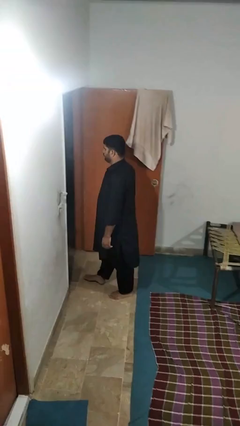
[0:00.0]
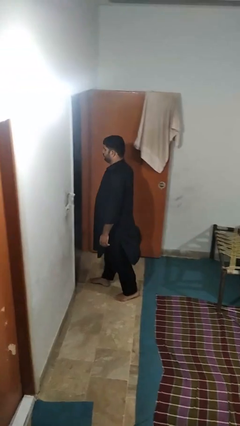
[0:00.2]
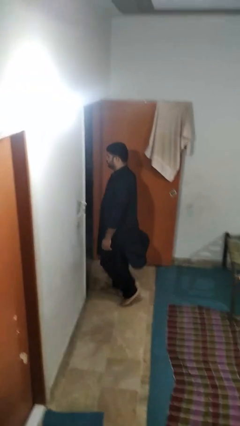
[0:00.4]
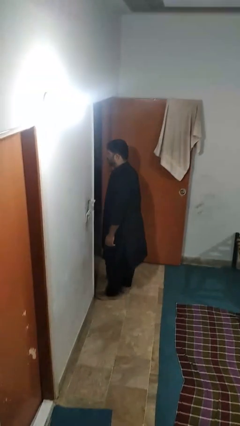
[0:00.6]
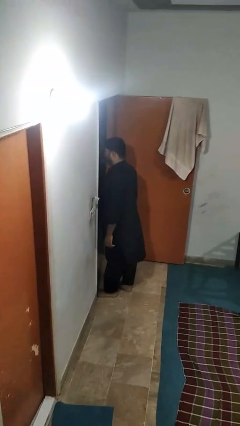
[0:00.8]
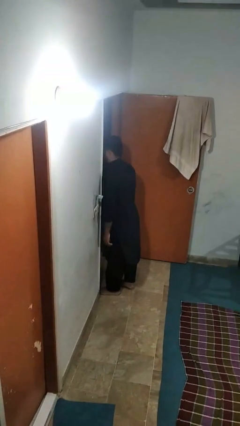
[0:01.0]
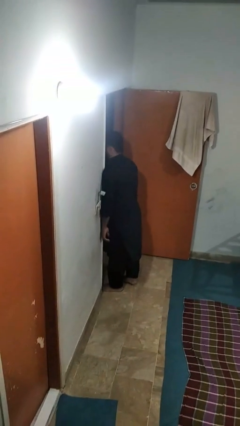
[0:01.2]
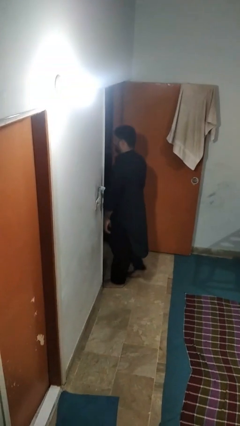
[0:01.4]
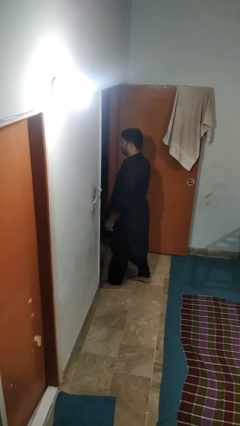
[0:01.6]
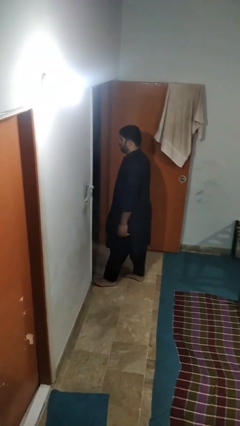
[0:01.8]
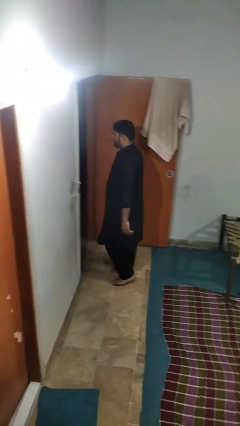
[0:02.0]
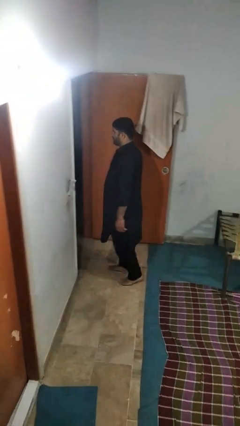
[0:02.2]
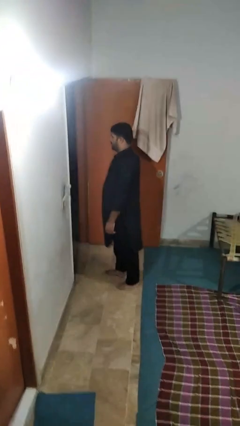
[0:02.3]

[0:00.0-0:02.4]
person bumps into wall

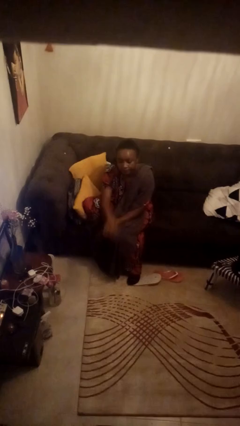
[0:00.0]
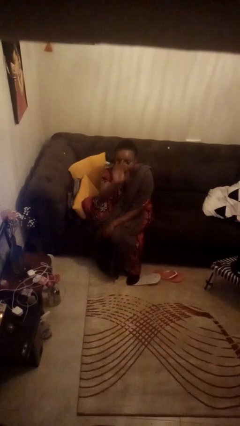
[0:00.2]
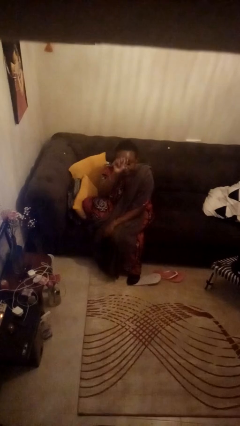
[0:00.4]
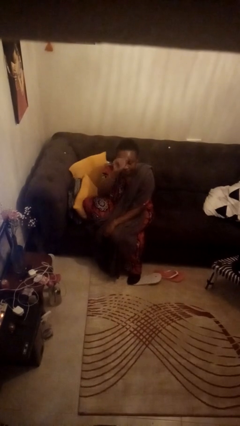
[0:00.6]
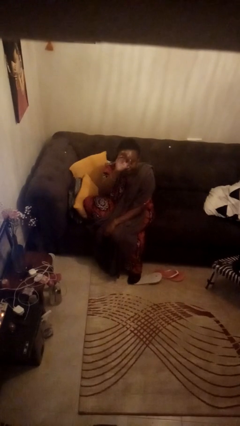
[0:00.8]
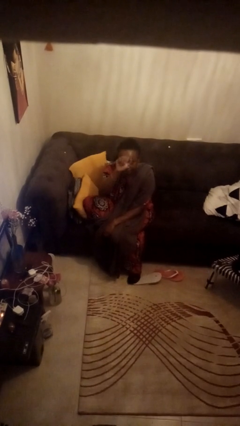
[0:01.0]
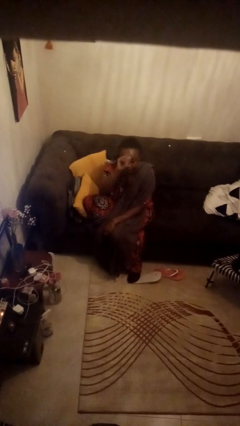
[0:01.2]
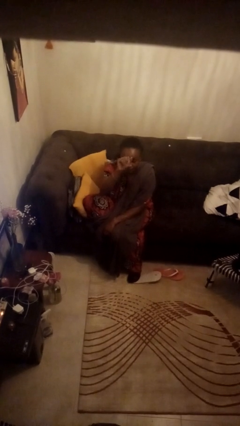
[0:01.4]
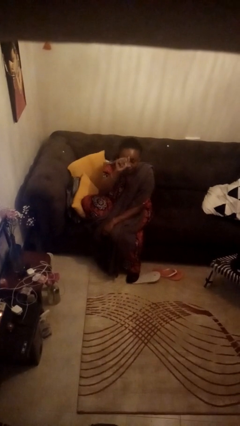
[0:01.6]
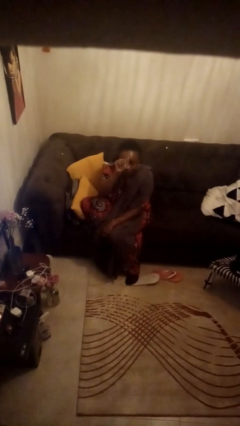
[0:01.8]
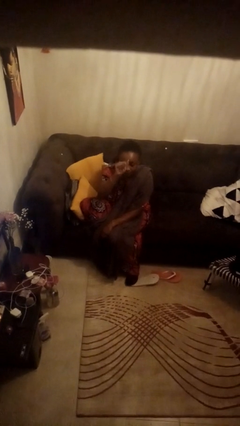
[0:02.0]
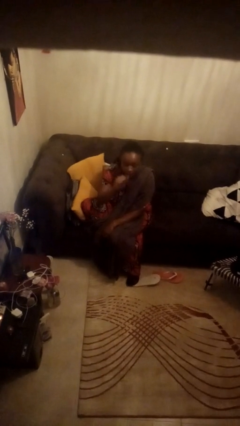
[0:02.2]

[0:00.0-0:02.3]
person gestures come here

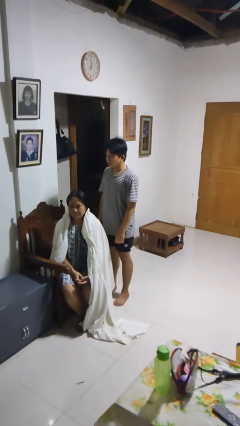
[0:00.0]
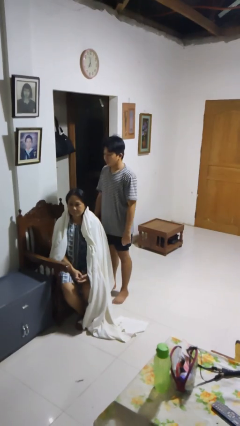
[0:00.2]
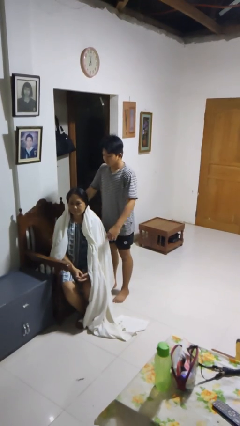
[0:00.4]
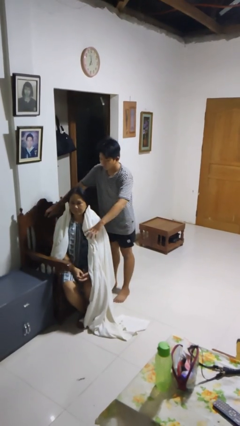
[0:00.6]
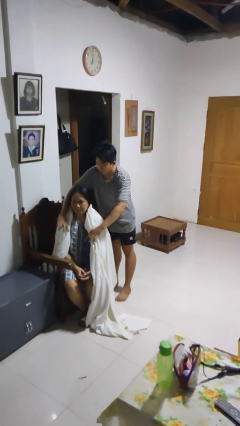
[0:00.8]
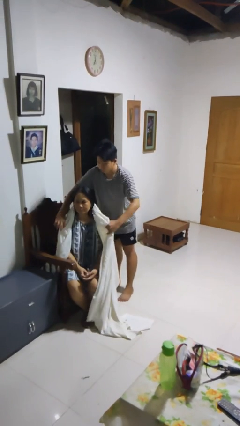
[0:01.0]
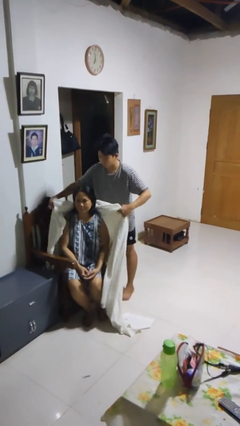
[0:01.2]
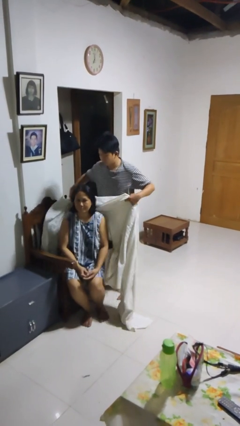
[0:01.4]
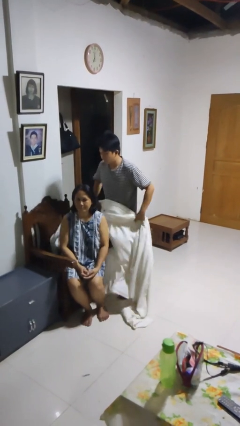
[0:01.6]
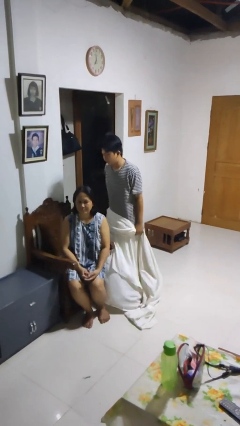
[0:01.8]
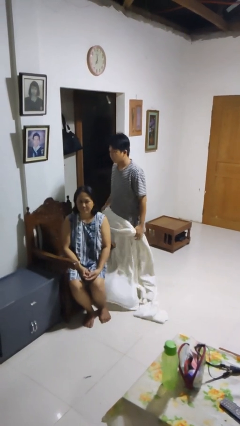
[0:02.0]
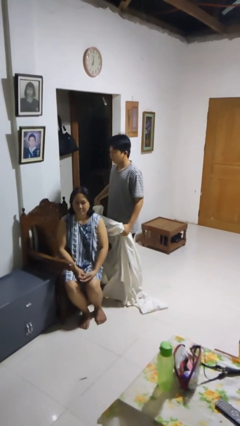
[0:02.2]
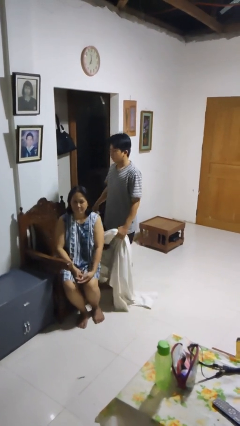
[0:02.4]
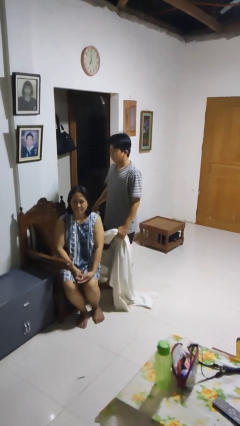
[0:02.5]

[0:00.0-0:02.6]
person uncovers friend with blanket

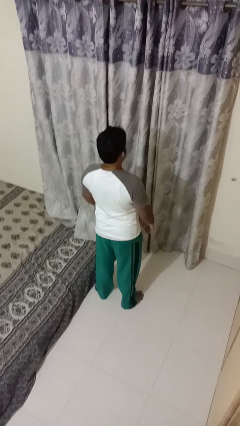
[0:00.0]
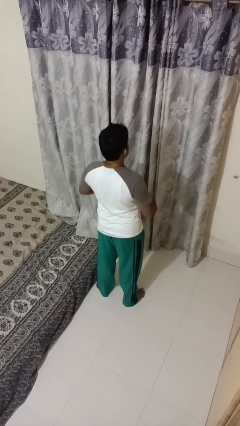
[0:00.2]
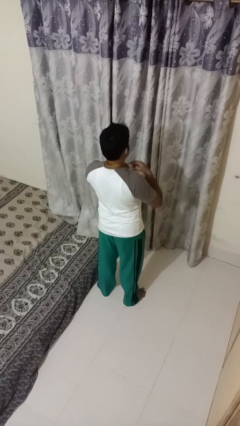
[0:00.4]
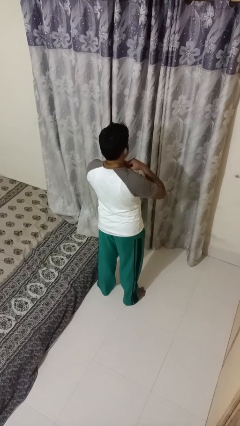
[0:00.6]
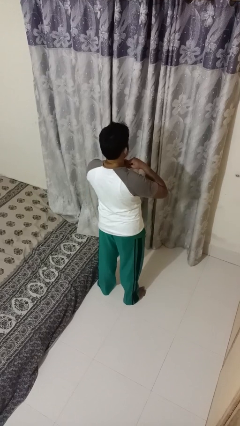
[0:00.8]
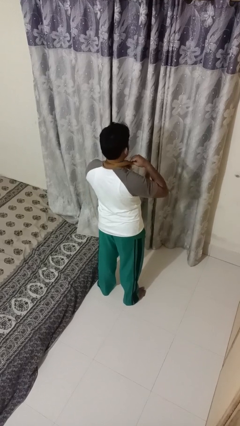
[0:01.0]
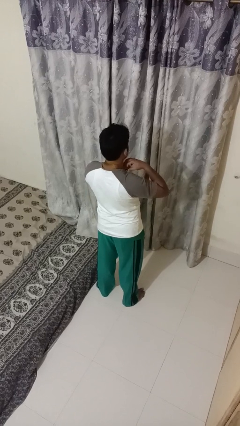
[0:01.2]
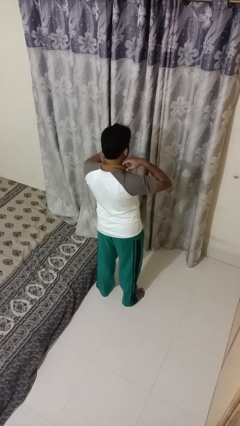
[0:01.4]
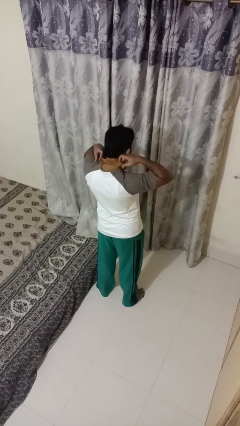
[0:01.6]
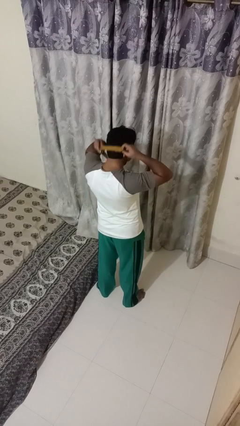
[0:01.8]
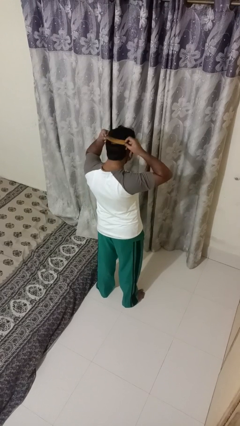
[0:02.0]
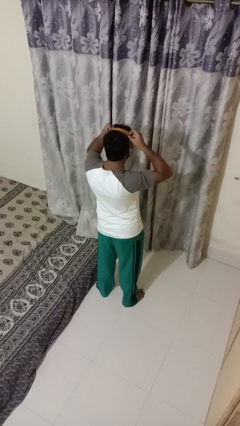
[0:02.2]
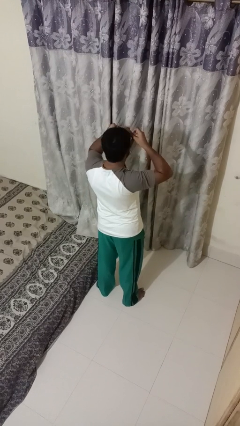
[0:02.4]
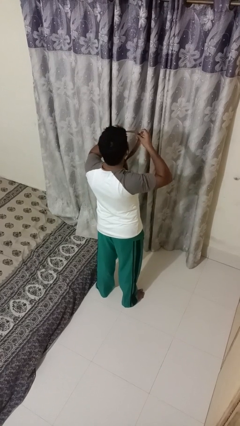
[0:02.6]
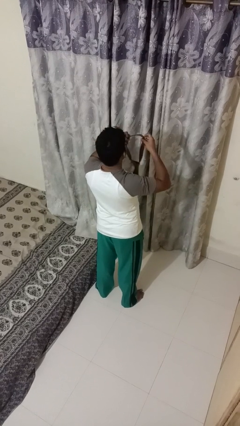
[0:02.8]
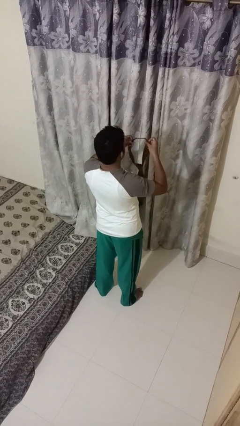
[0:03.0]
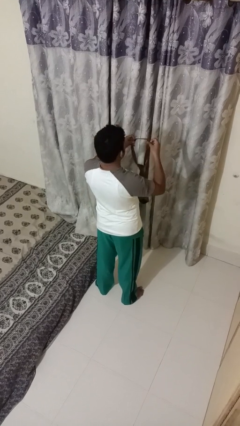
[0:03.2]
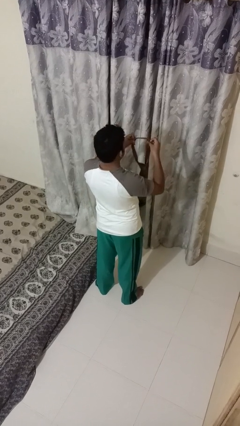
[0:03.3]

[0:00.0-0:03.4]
person takes off necktie

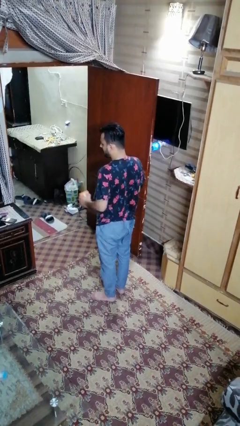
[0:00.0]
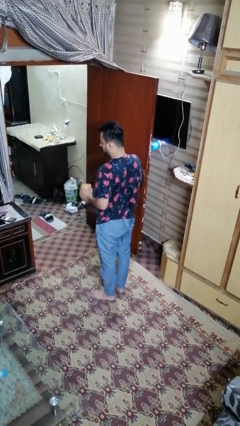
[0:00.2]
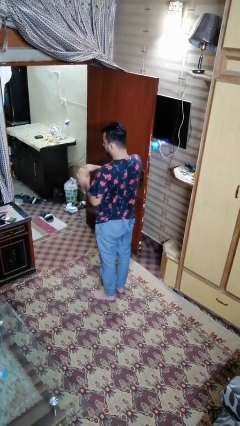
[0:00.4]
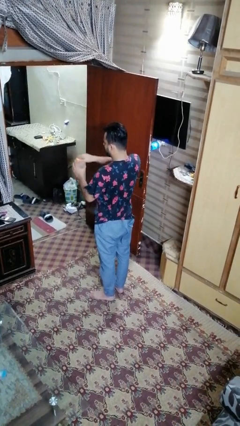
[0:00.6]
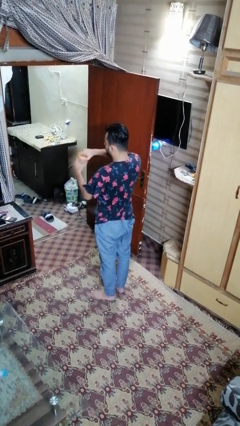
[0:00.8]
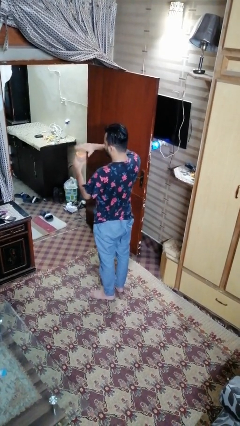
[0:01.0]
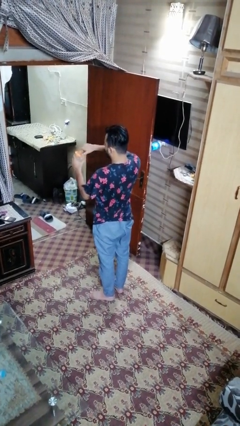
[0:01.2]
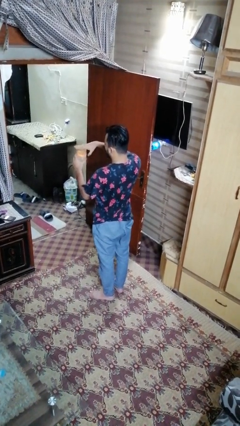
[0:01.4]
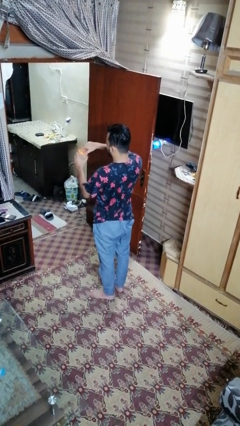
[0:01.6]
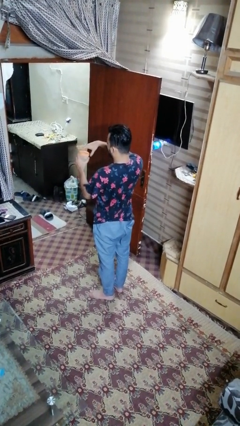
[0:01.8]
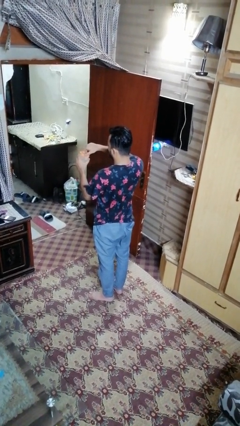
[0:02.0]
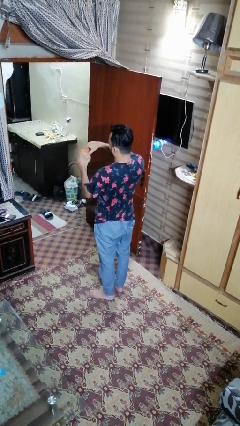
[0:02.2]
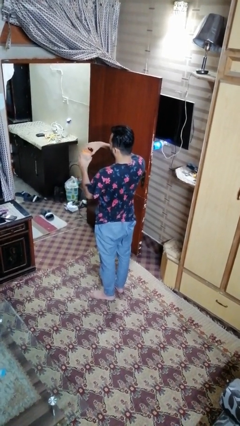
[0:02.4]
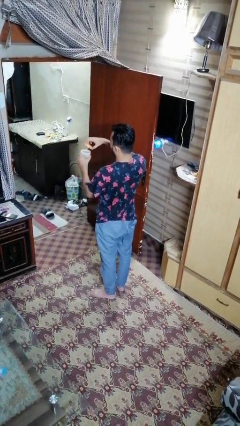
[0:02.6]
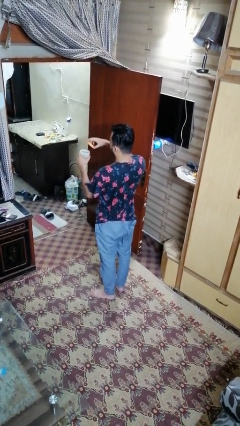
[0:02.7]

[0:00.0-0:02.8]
person opens jar

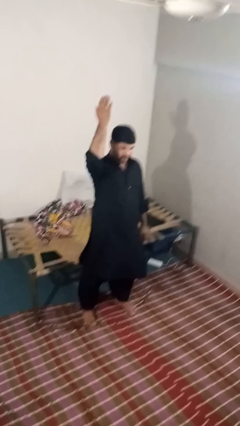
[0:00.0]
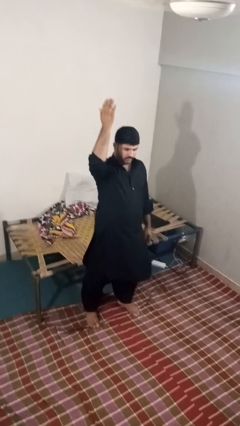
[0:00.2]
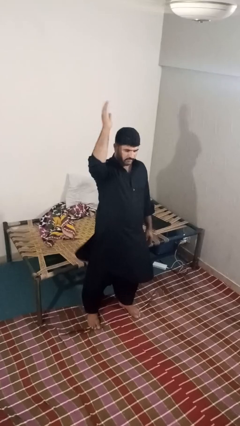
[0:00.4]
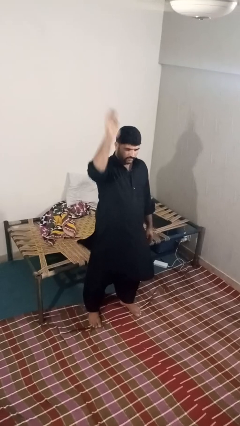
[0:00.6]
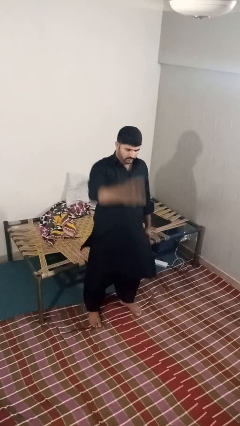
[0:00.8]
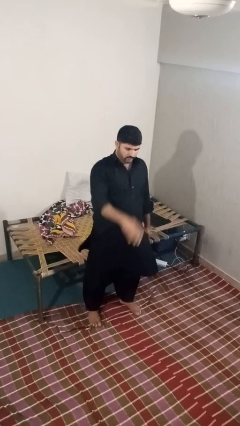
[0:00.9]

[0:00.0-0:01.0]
person gestures swipe down

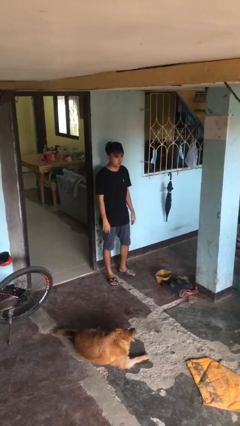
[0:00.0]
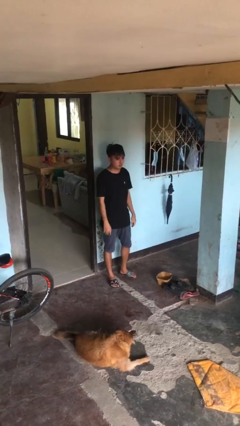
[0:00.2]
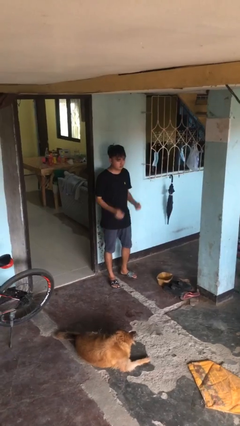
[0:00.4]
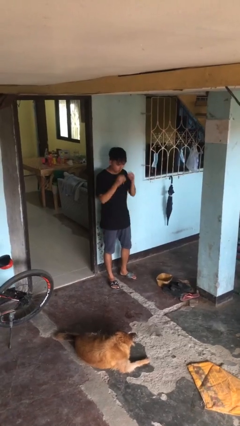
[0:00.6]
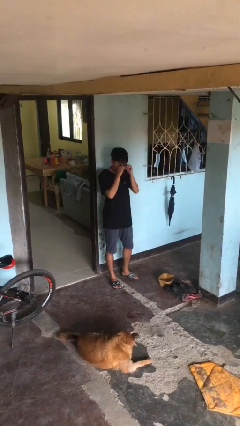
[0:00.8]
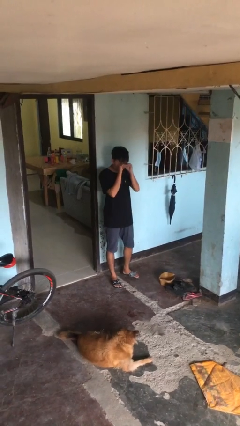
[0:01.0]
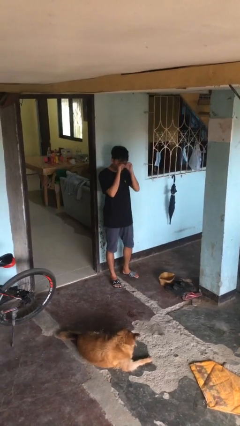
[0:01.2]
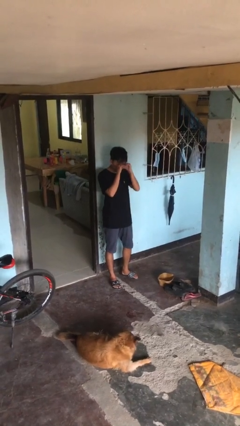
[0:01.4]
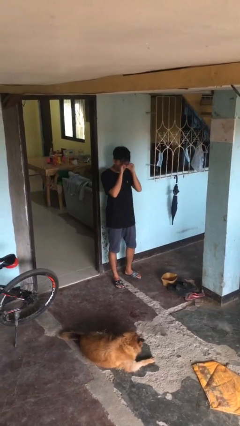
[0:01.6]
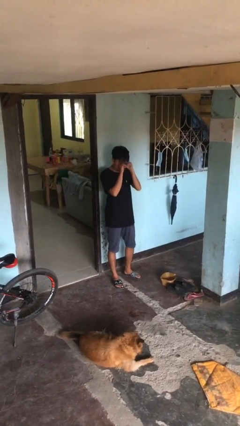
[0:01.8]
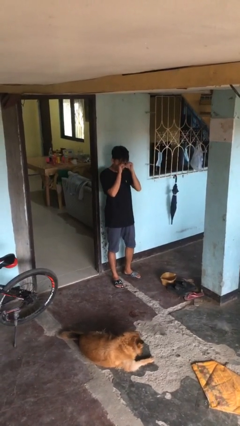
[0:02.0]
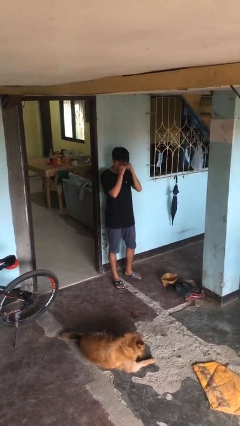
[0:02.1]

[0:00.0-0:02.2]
person rubs eyes

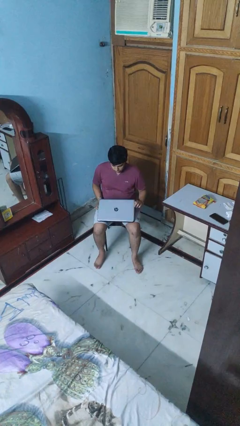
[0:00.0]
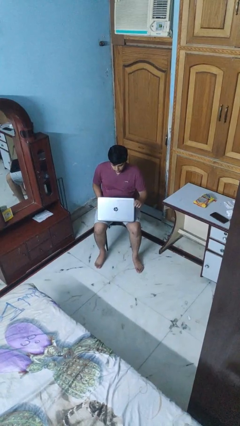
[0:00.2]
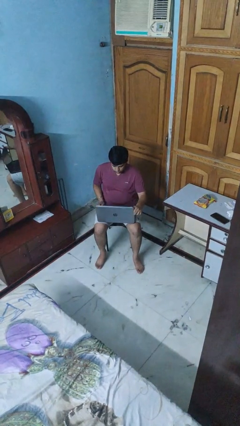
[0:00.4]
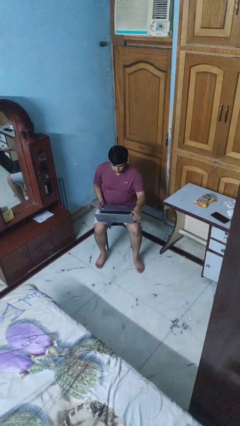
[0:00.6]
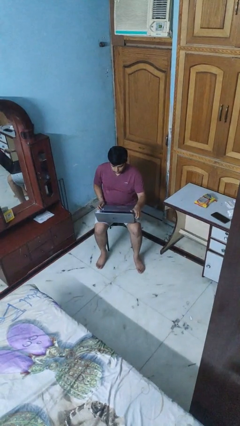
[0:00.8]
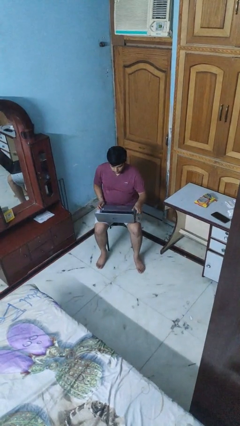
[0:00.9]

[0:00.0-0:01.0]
person opens laptop
